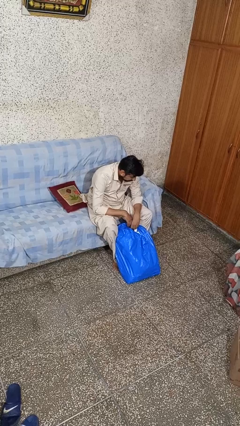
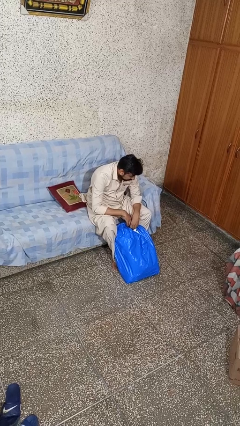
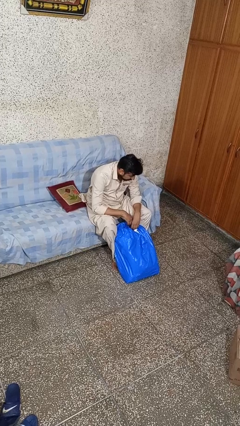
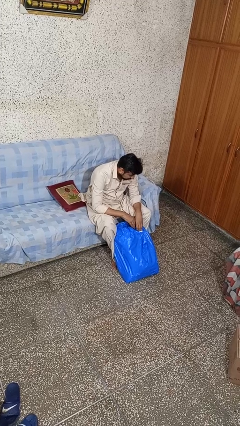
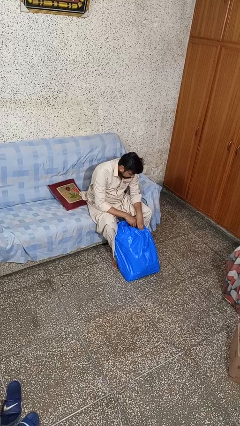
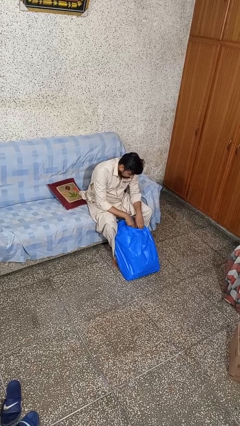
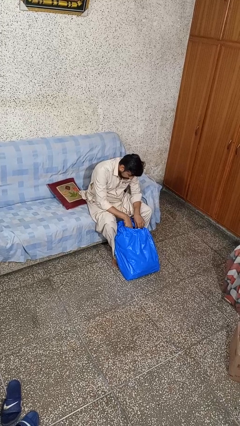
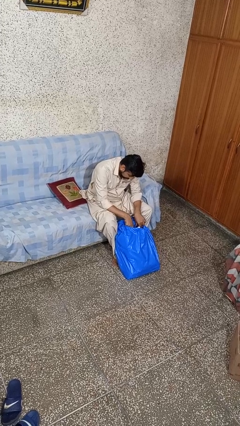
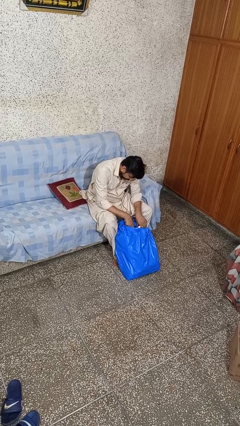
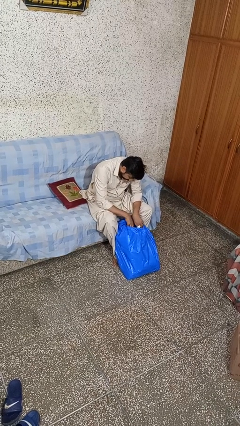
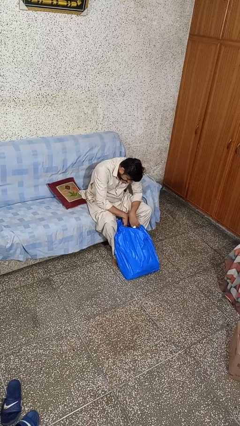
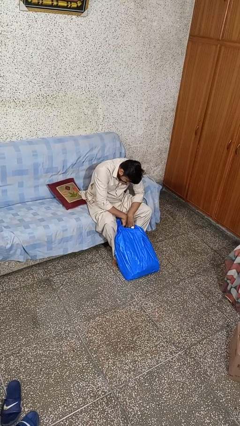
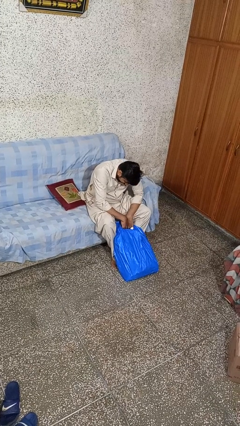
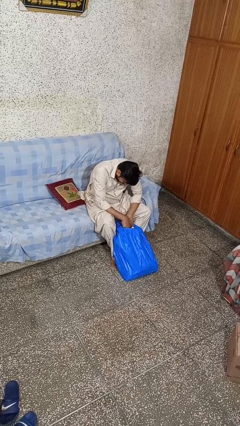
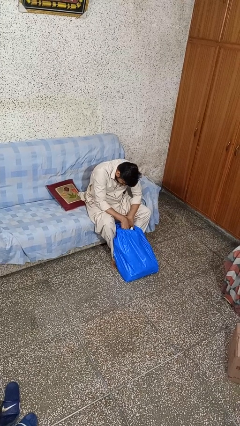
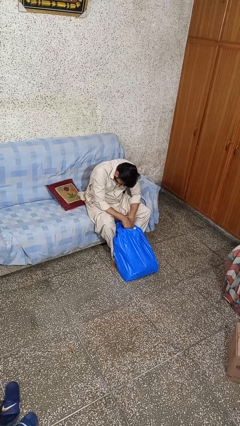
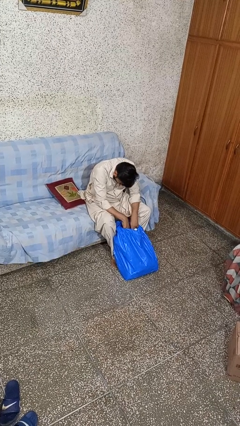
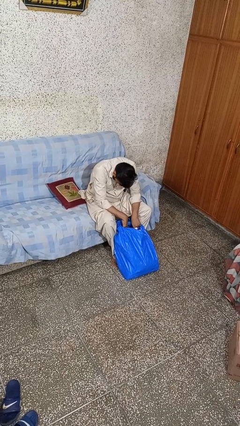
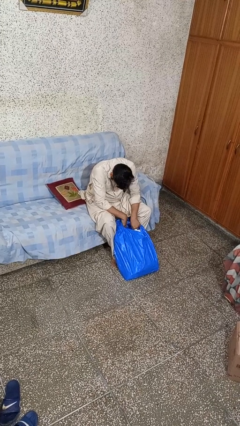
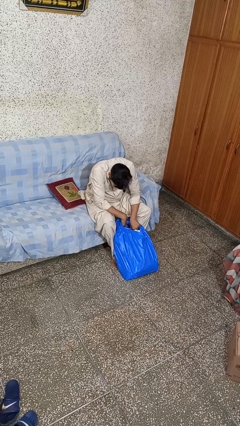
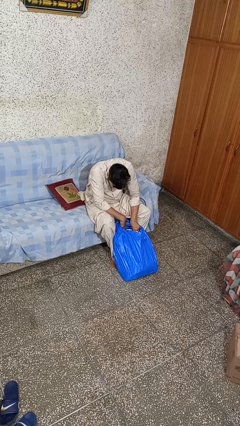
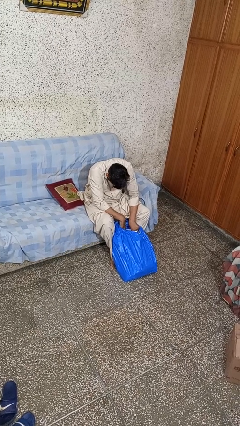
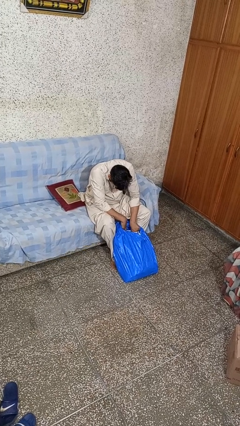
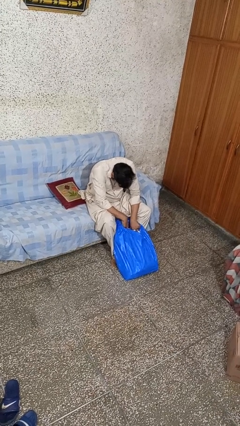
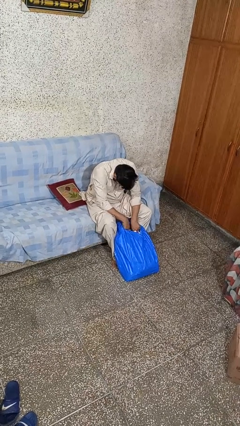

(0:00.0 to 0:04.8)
person searches in bag

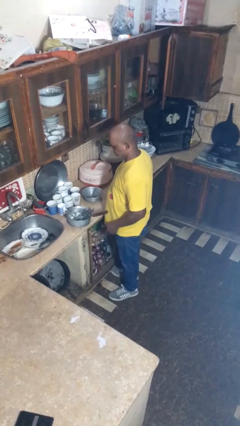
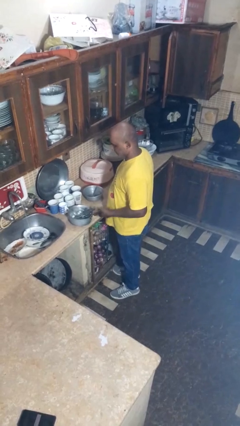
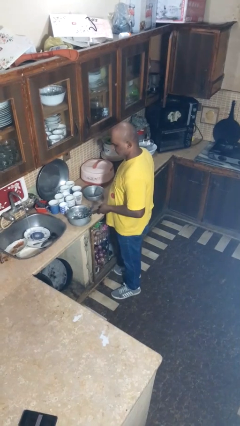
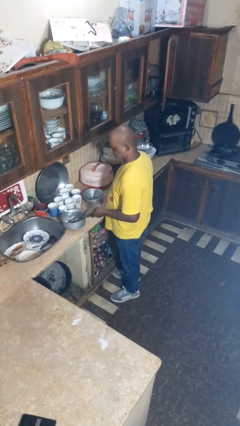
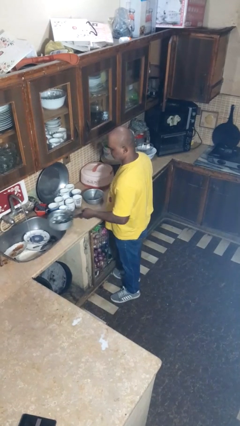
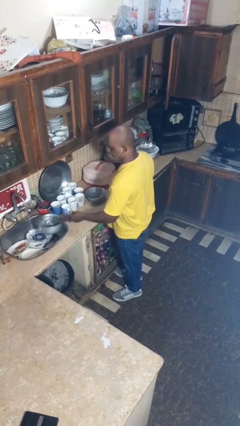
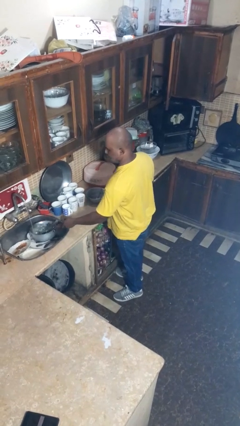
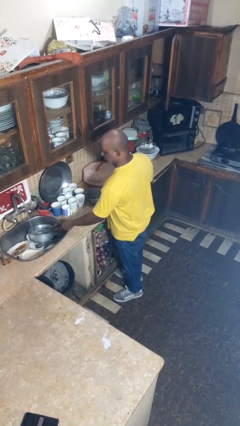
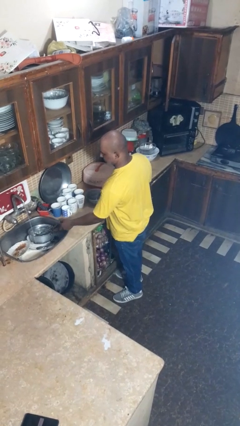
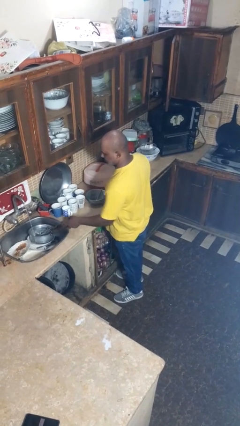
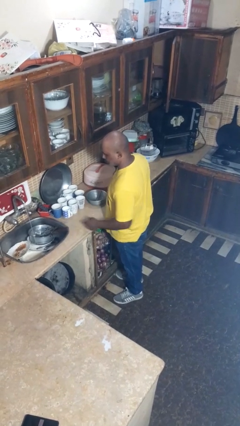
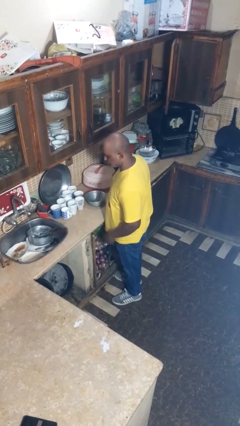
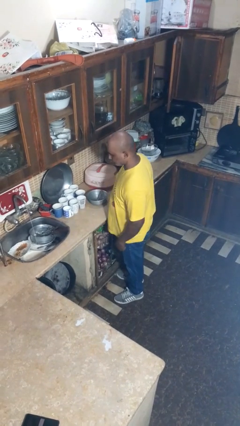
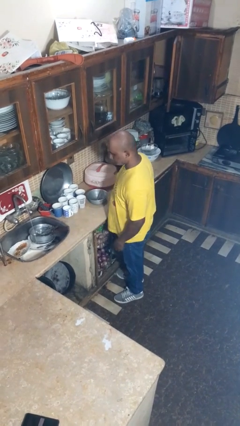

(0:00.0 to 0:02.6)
person loads dishwasher

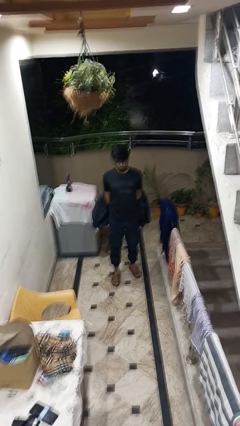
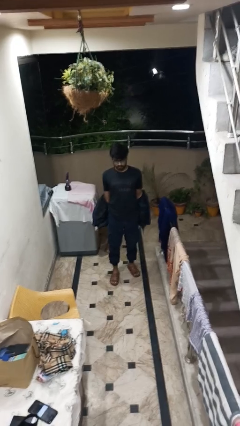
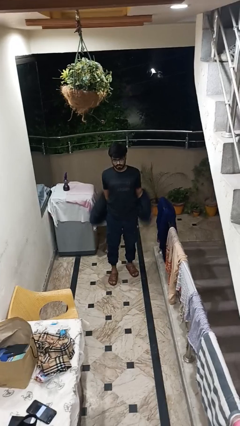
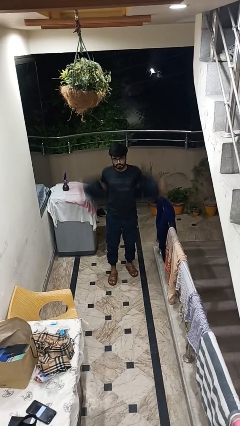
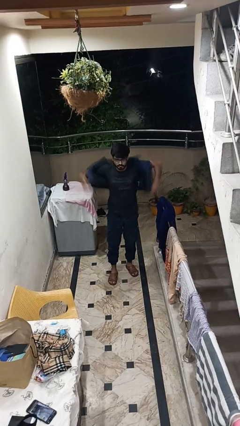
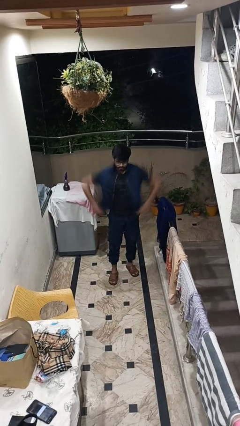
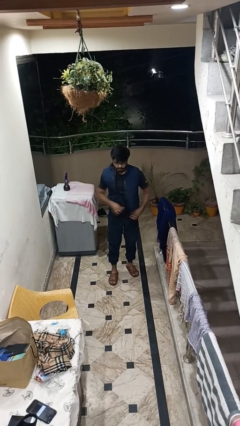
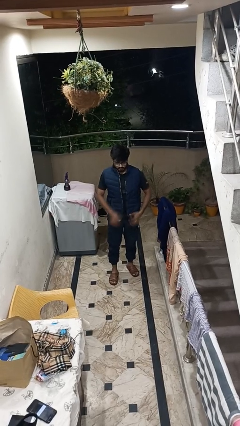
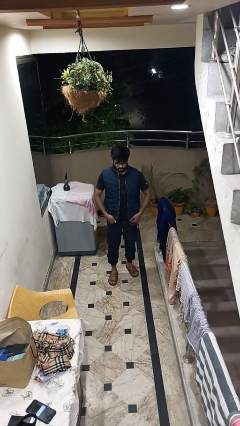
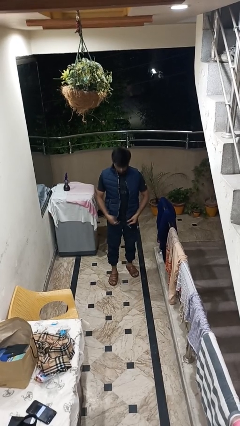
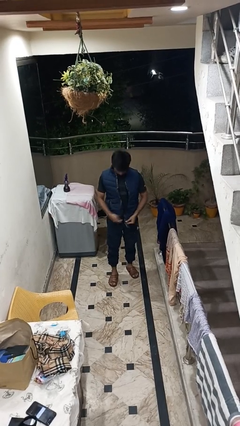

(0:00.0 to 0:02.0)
person puts on jacket

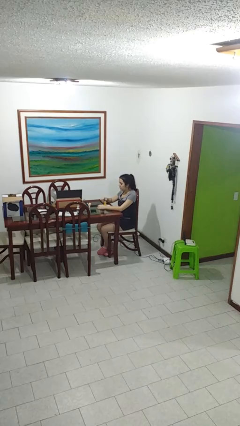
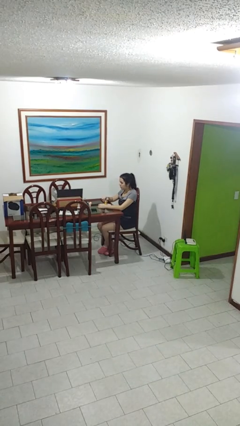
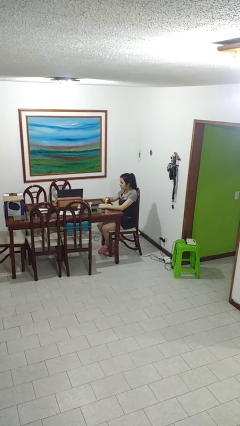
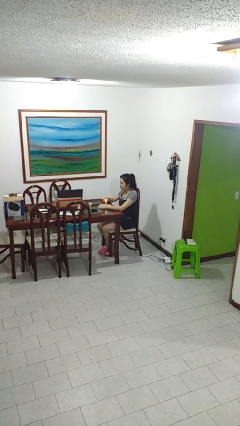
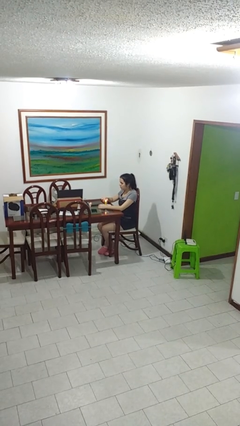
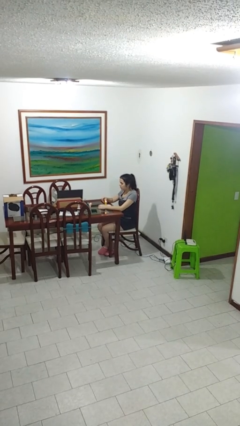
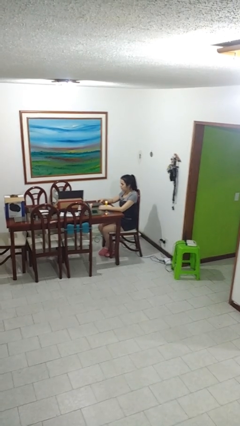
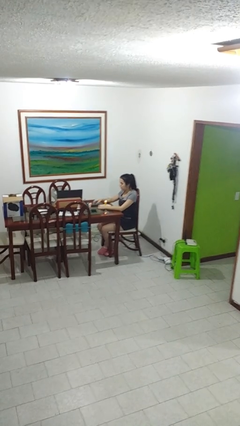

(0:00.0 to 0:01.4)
person lights candle

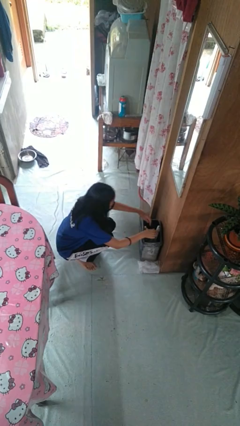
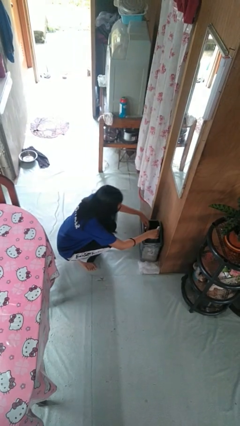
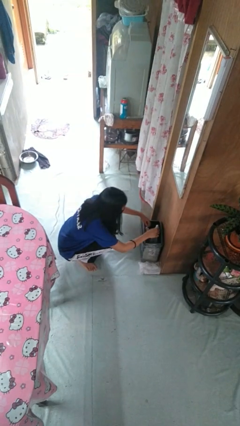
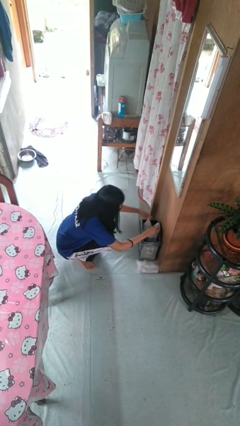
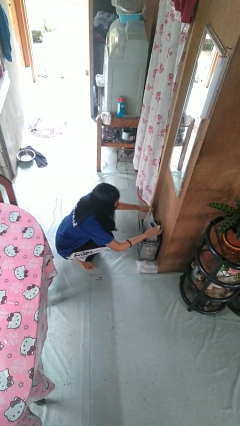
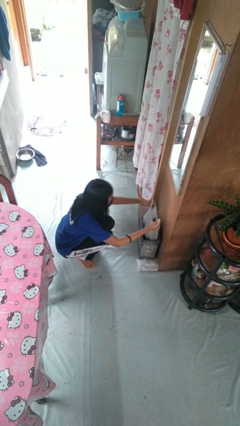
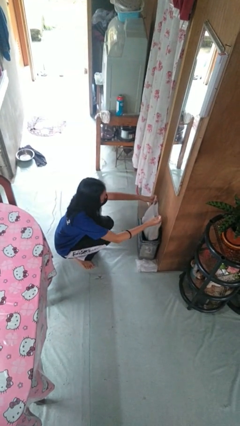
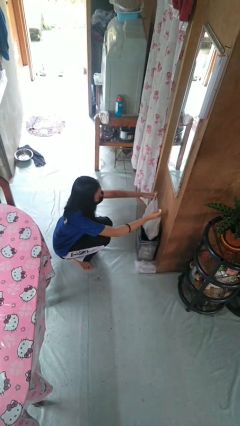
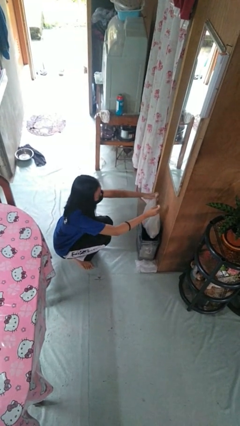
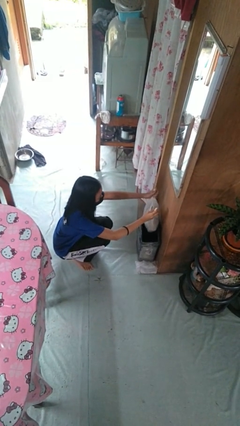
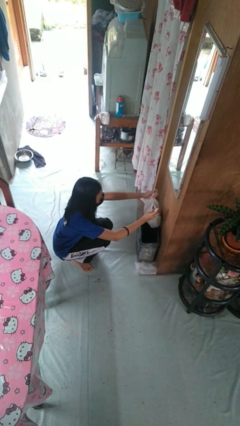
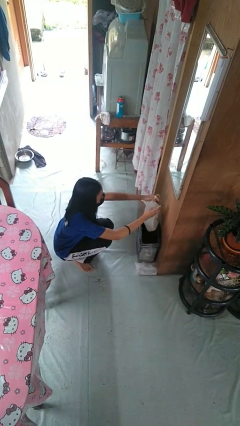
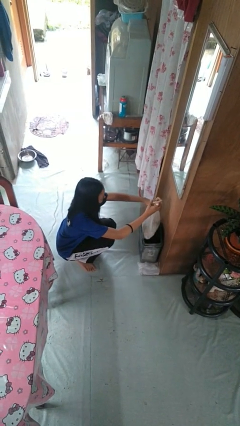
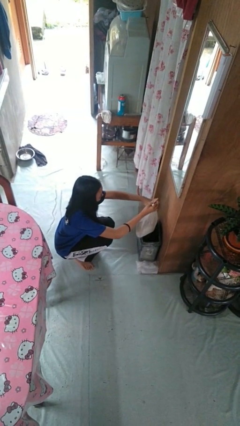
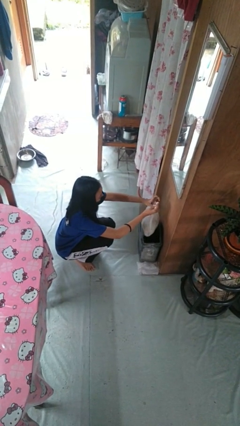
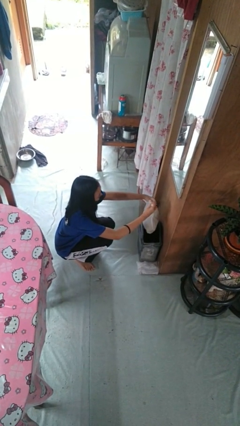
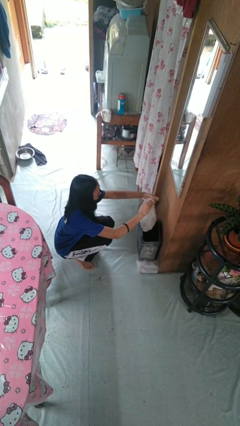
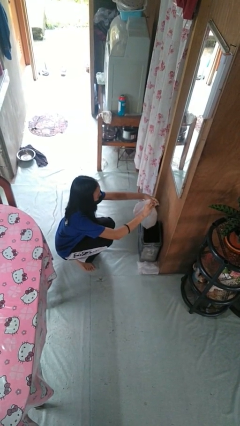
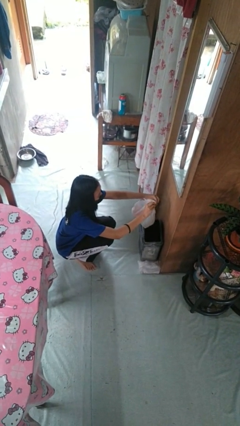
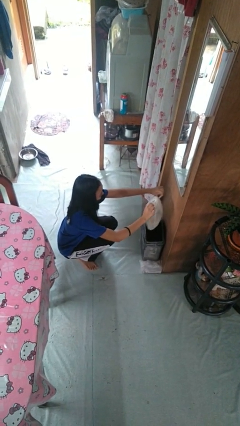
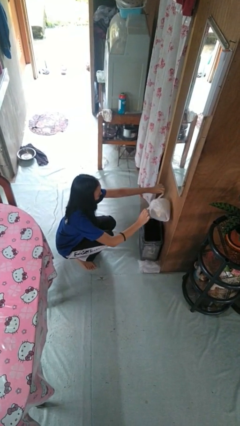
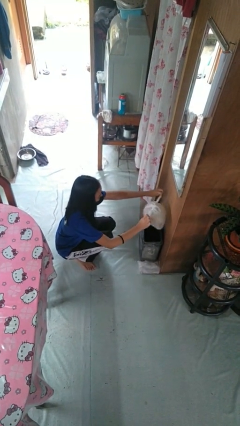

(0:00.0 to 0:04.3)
person removes trashbag from trashcan

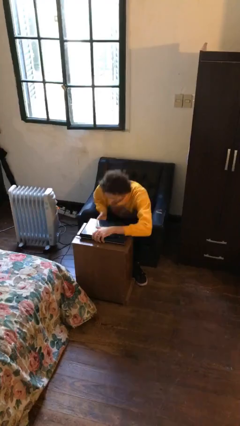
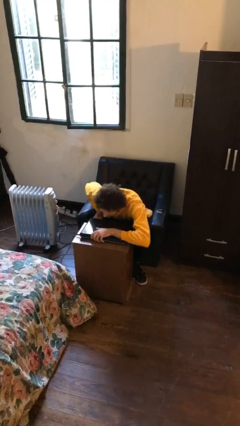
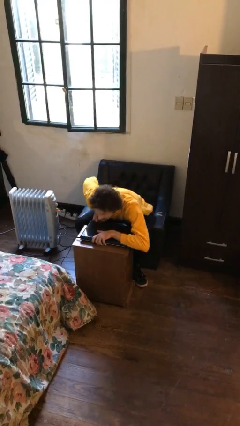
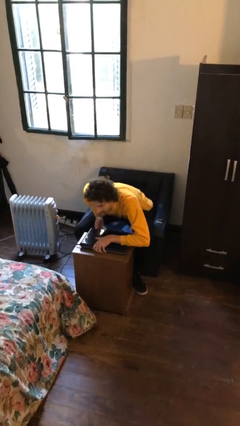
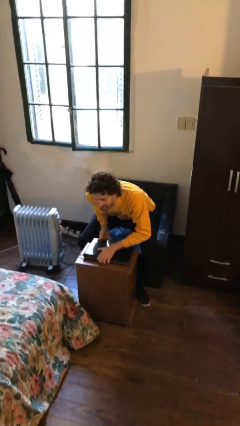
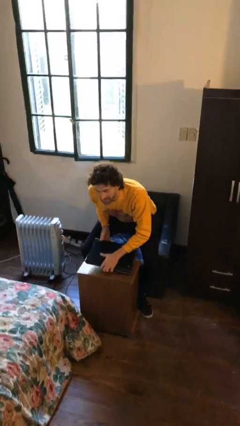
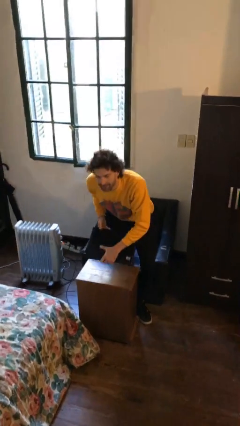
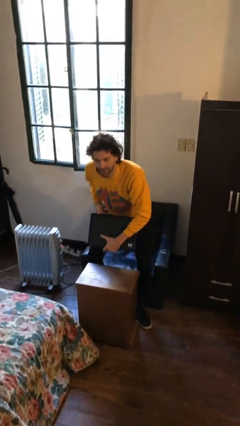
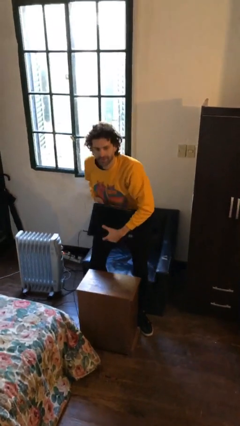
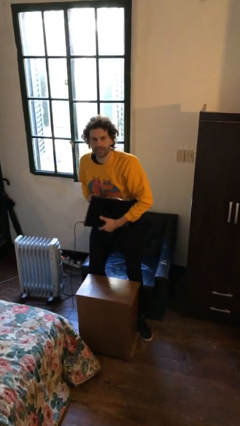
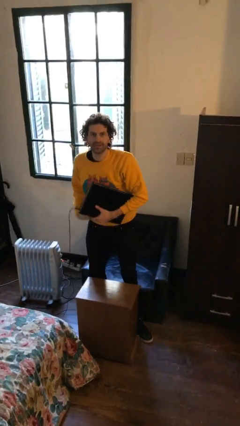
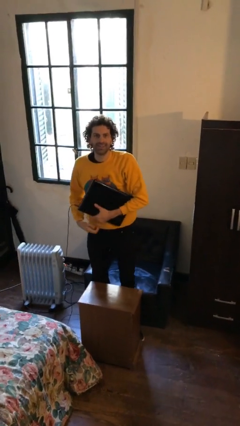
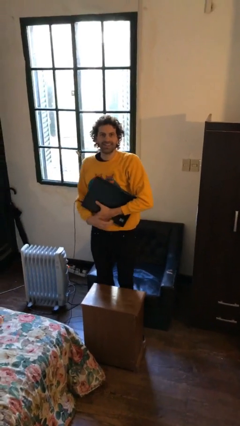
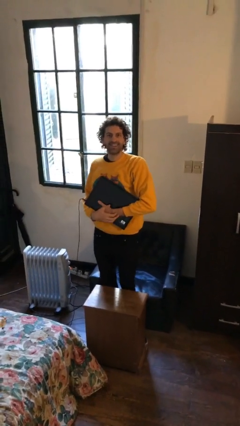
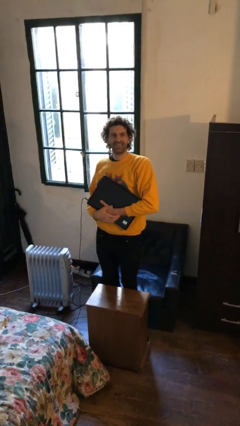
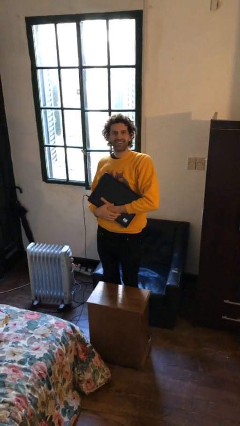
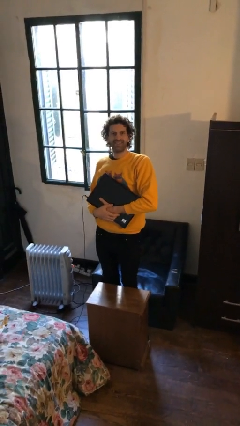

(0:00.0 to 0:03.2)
person stands up
